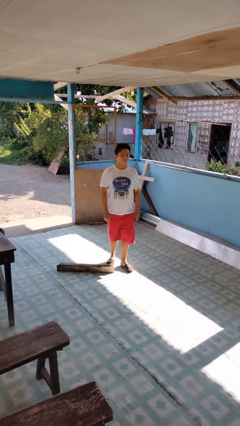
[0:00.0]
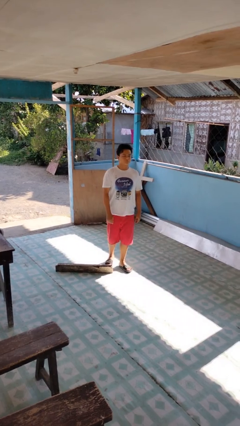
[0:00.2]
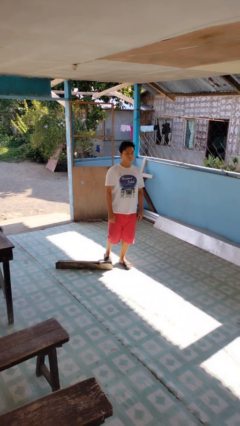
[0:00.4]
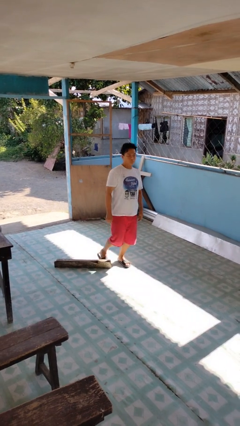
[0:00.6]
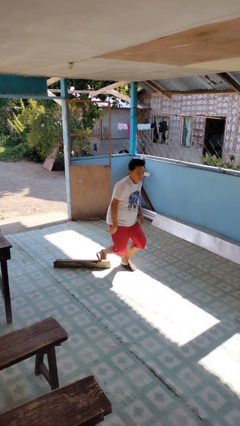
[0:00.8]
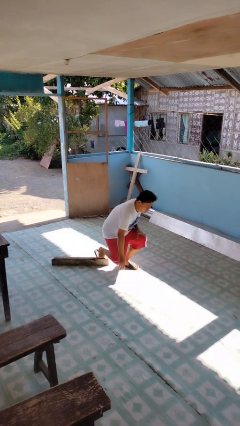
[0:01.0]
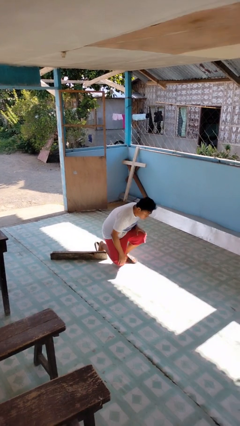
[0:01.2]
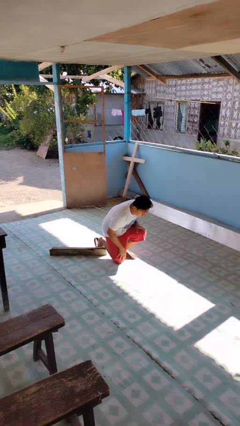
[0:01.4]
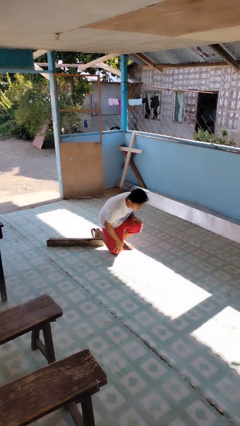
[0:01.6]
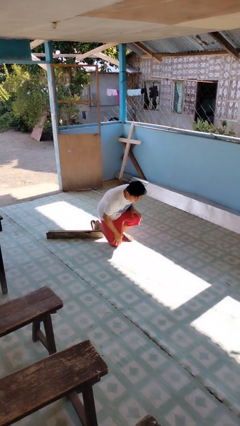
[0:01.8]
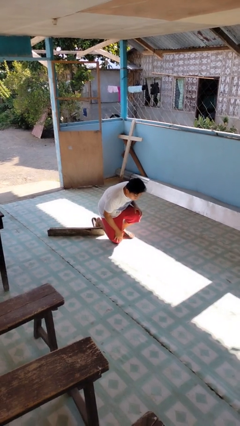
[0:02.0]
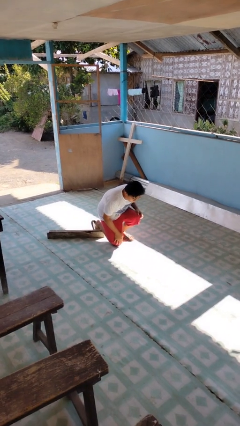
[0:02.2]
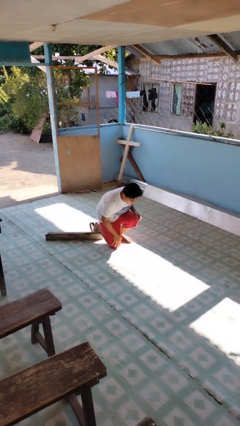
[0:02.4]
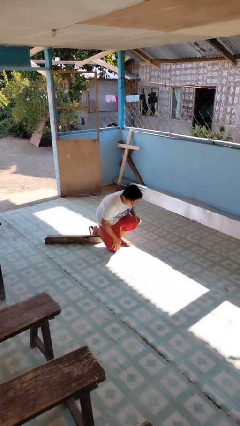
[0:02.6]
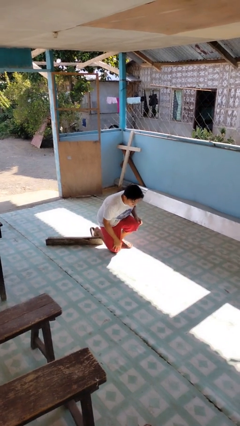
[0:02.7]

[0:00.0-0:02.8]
person trips on object on floor

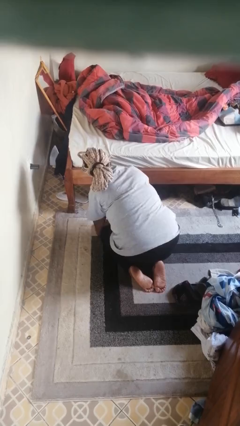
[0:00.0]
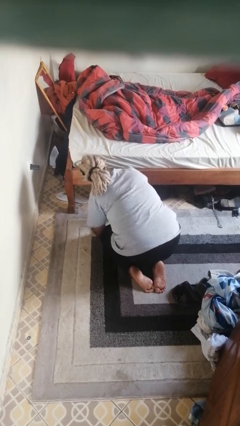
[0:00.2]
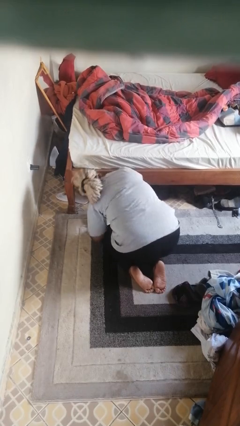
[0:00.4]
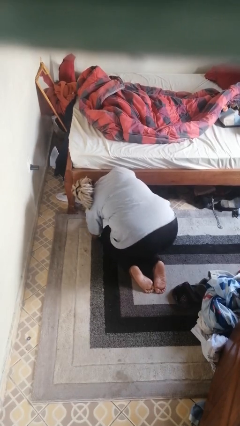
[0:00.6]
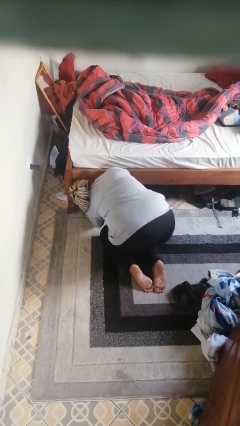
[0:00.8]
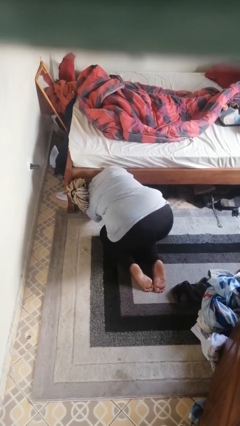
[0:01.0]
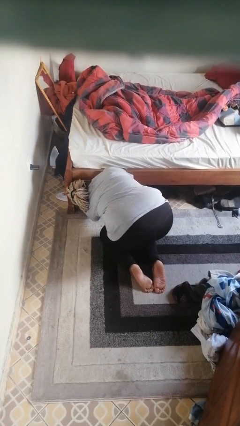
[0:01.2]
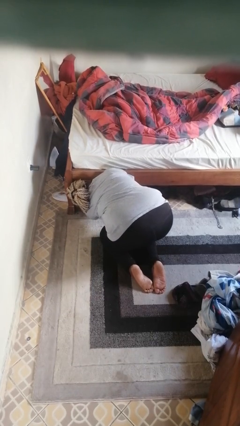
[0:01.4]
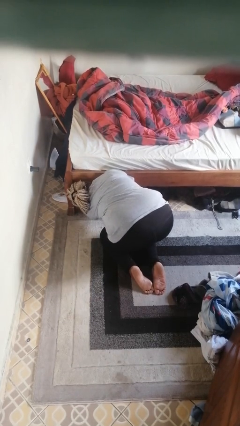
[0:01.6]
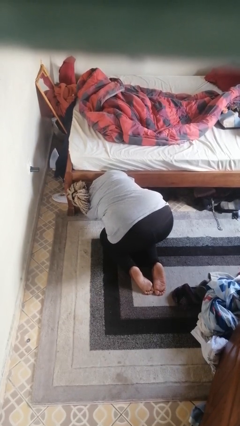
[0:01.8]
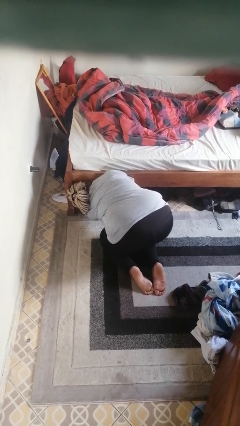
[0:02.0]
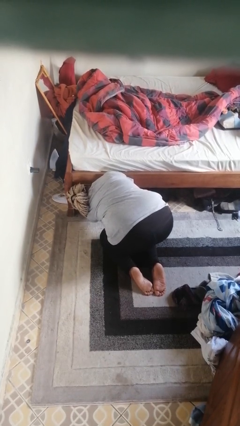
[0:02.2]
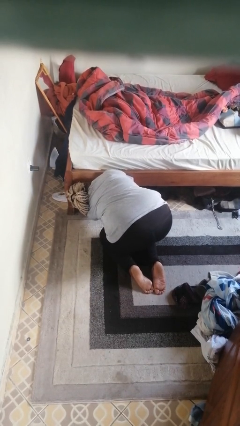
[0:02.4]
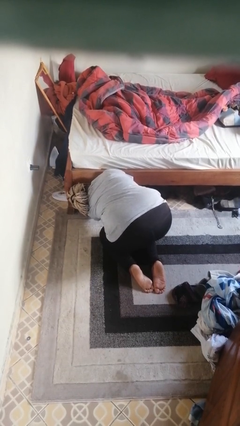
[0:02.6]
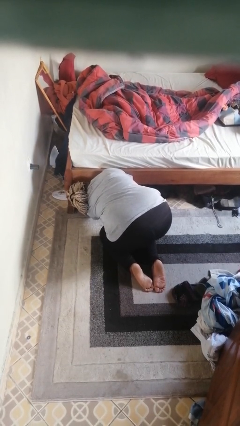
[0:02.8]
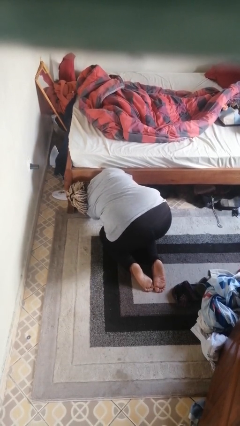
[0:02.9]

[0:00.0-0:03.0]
person searches under bed

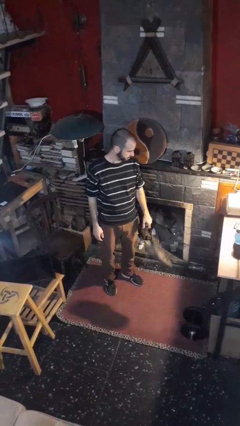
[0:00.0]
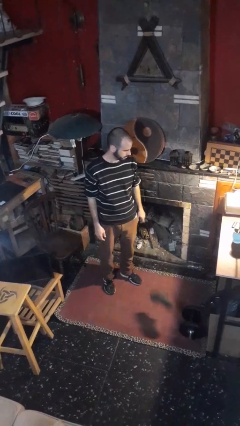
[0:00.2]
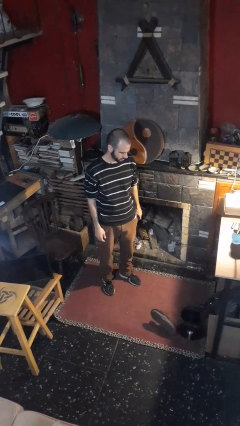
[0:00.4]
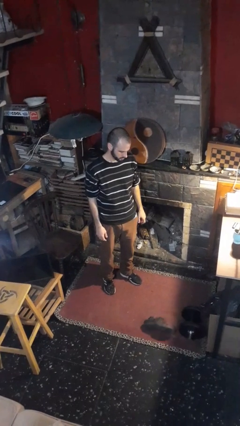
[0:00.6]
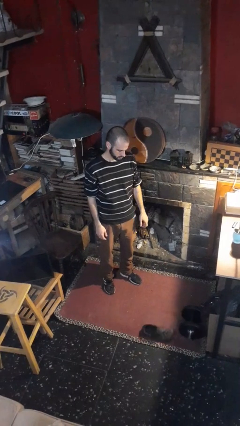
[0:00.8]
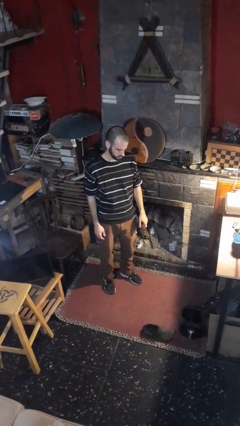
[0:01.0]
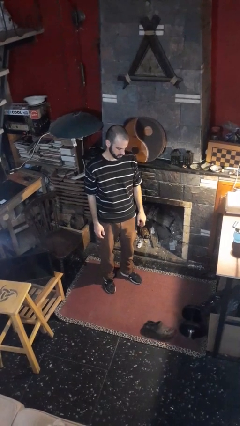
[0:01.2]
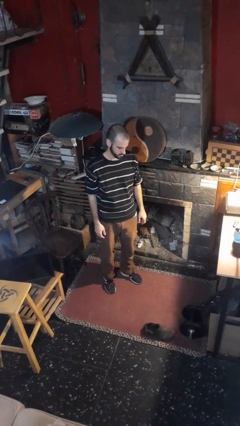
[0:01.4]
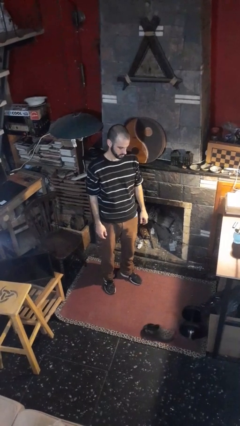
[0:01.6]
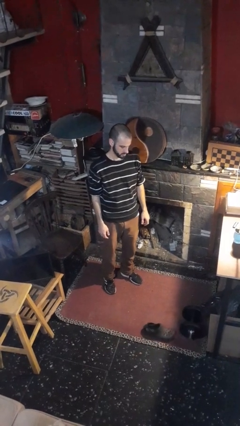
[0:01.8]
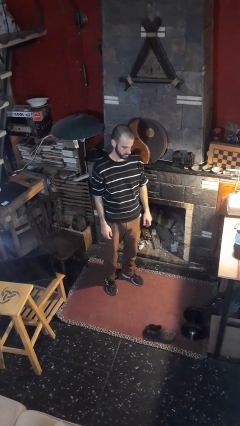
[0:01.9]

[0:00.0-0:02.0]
person drops object

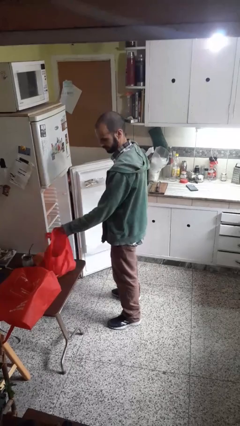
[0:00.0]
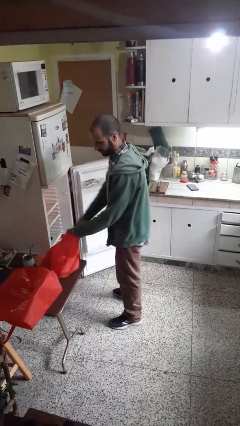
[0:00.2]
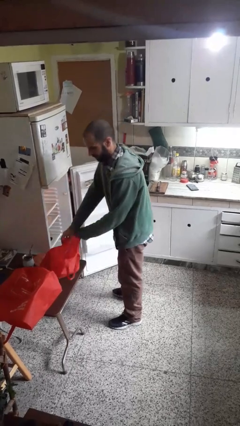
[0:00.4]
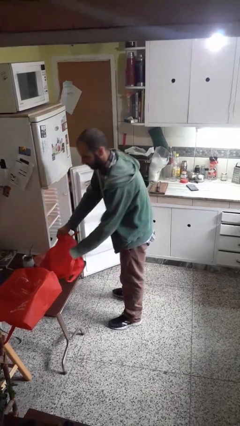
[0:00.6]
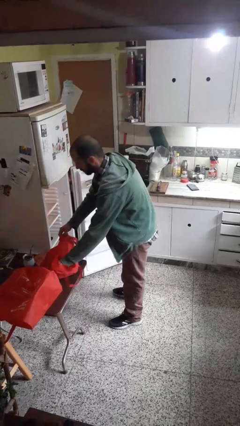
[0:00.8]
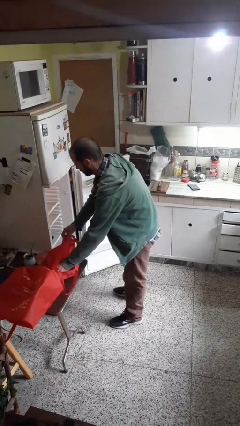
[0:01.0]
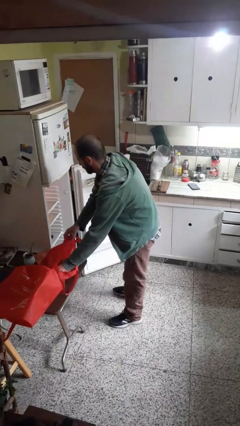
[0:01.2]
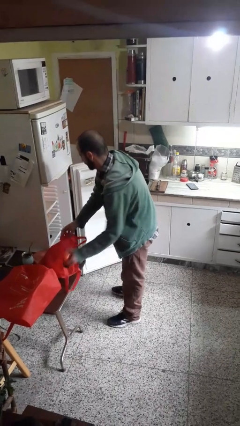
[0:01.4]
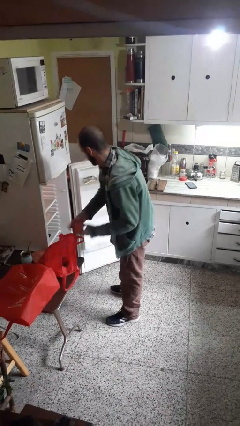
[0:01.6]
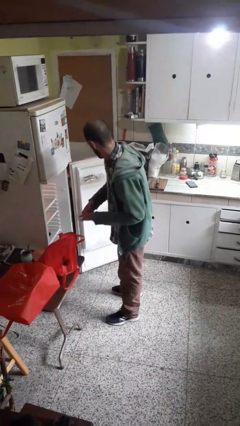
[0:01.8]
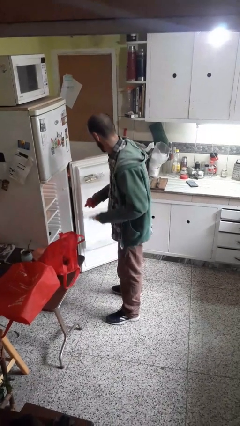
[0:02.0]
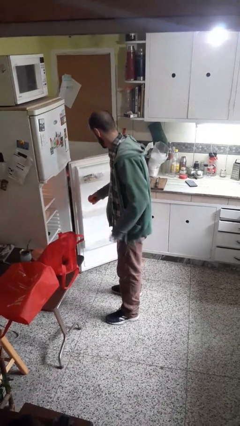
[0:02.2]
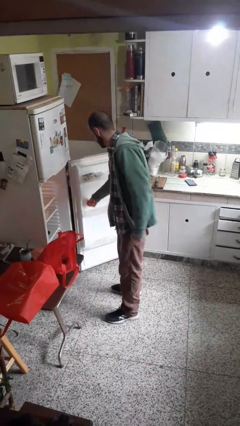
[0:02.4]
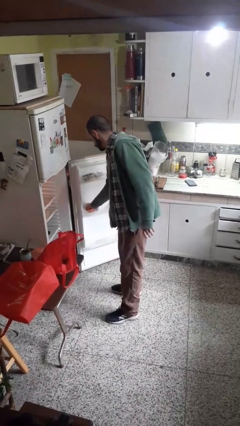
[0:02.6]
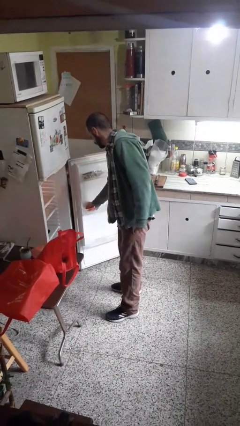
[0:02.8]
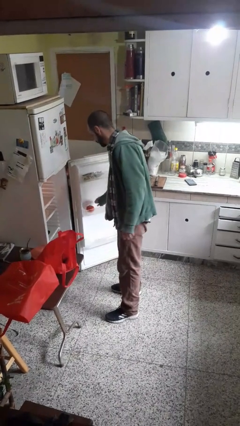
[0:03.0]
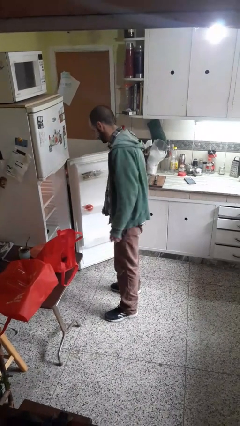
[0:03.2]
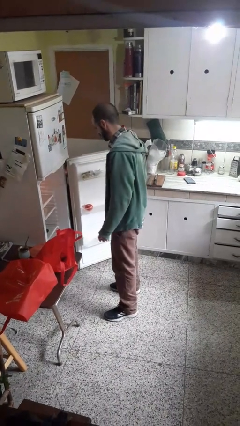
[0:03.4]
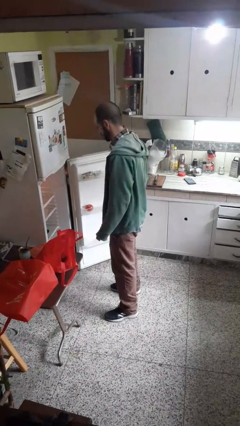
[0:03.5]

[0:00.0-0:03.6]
person loads groceries into refrigerator

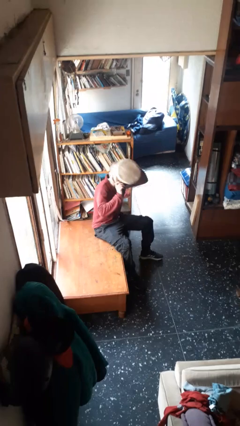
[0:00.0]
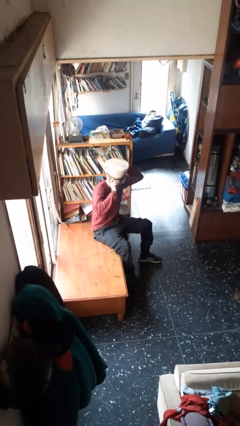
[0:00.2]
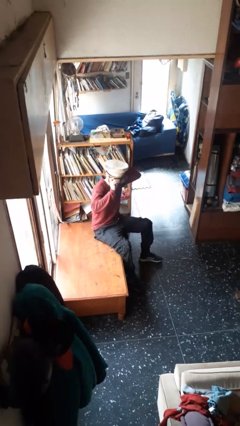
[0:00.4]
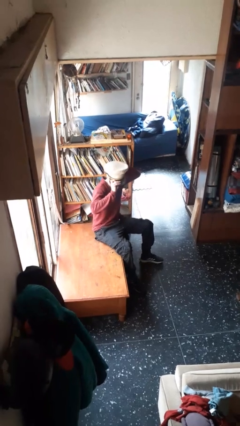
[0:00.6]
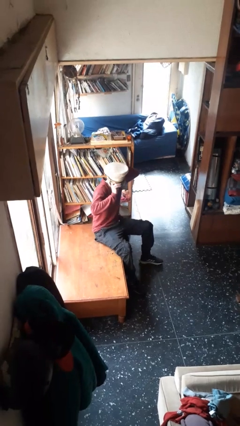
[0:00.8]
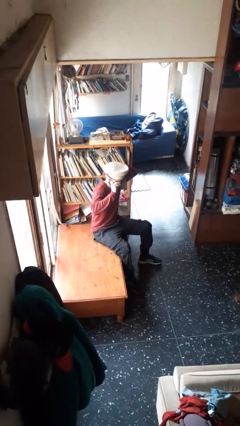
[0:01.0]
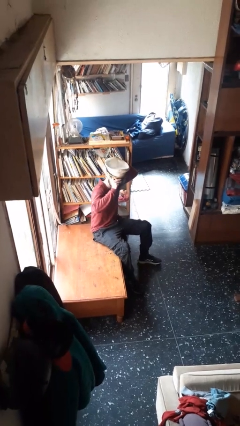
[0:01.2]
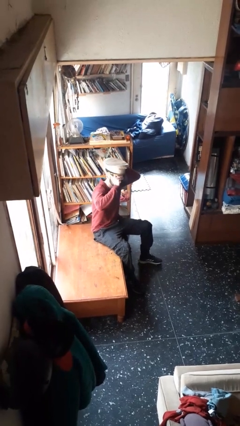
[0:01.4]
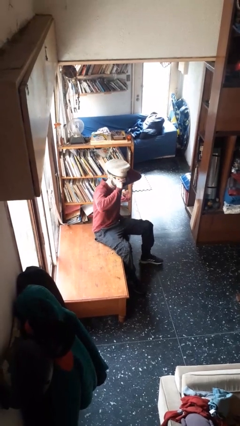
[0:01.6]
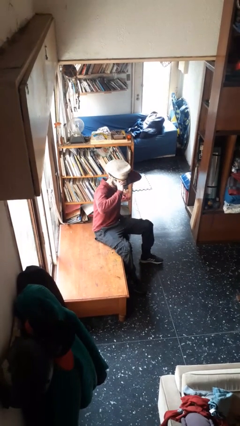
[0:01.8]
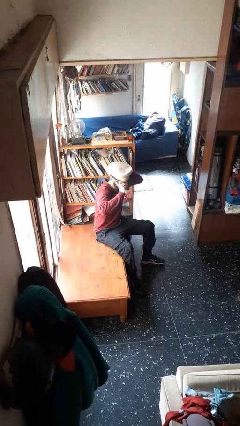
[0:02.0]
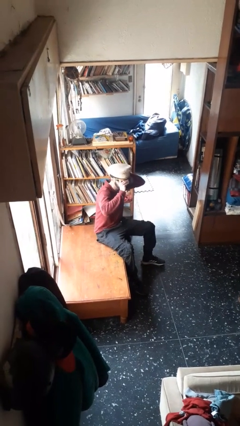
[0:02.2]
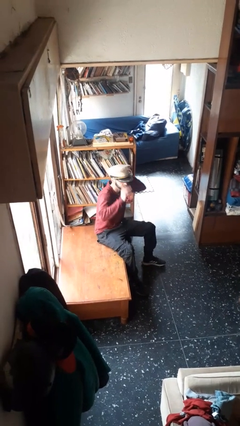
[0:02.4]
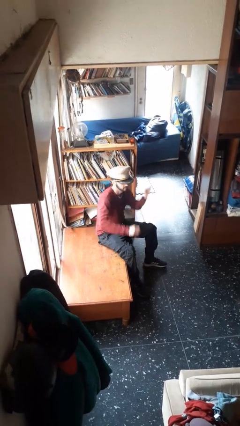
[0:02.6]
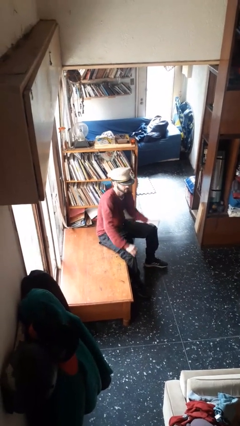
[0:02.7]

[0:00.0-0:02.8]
person puts on hat

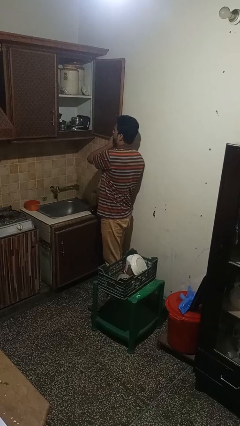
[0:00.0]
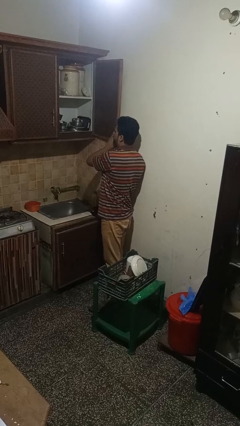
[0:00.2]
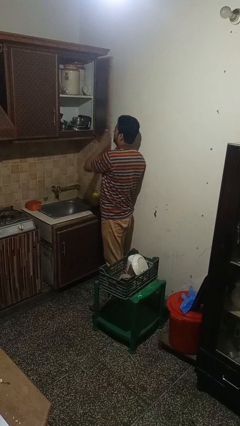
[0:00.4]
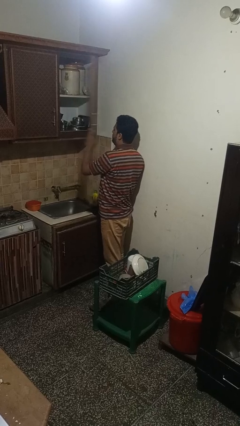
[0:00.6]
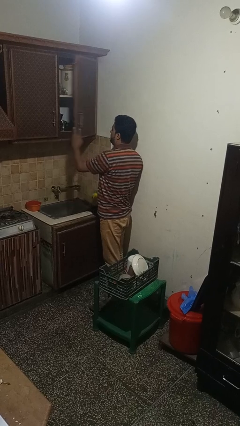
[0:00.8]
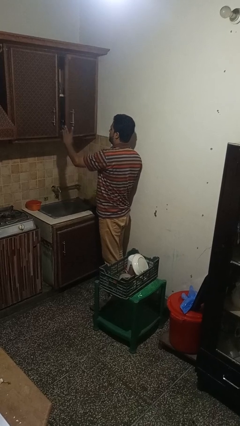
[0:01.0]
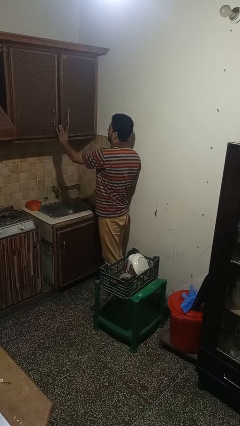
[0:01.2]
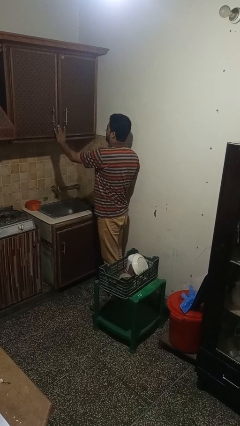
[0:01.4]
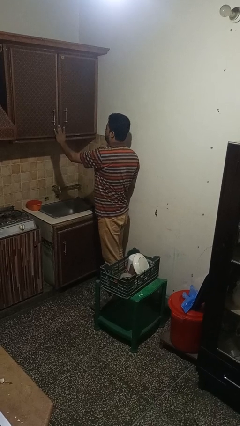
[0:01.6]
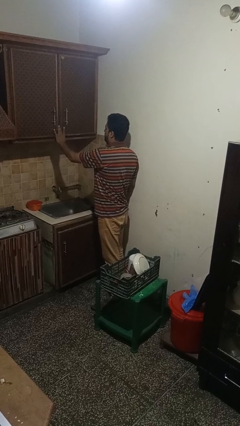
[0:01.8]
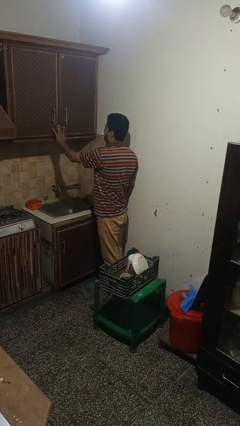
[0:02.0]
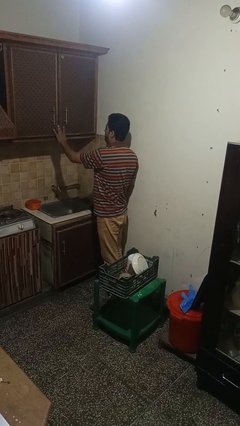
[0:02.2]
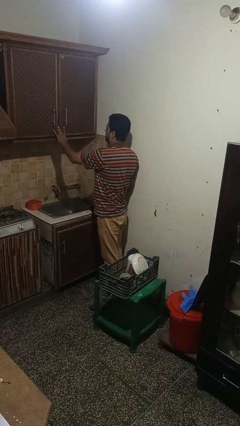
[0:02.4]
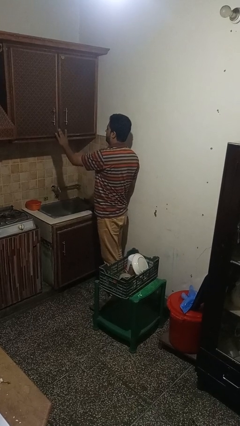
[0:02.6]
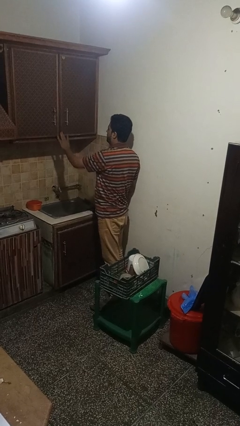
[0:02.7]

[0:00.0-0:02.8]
person closes cabinet

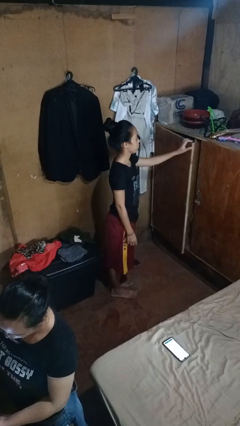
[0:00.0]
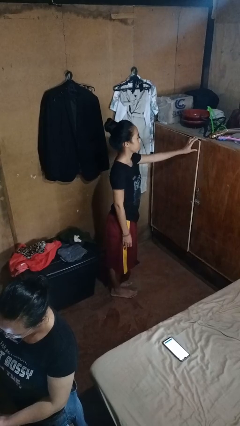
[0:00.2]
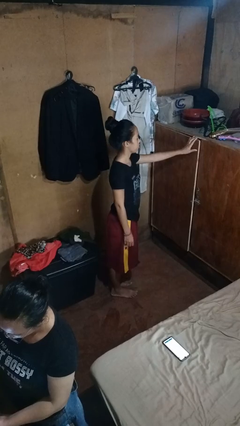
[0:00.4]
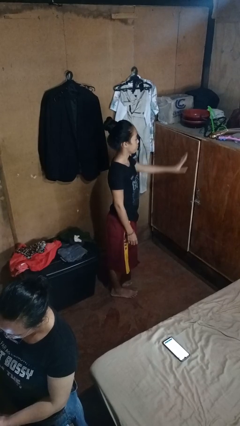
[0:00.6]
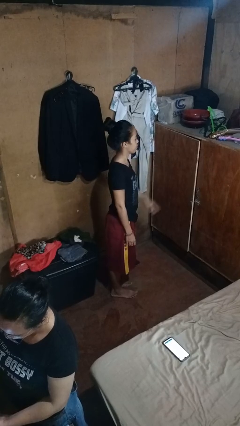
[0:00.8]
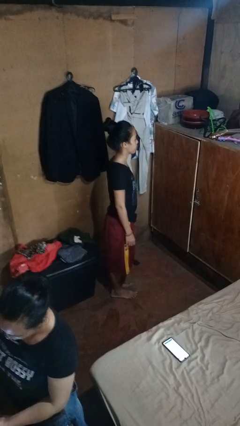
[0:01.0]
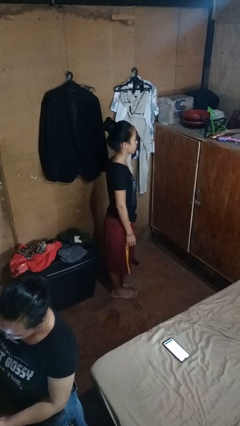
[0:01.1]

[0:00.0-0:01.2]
person closes closet door
